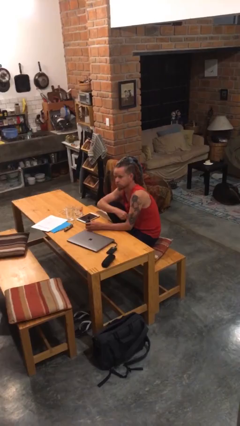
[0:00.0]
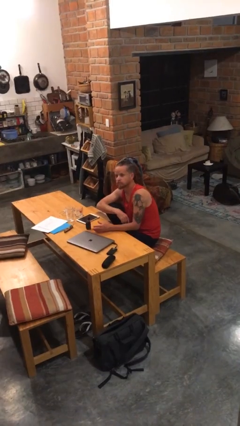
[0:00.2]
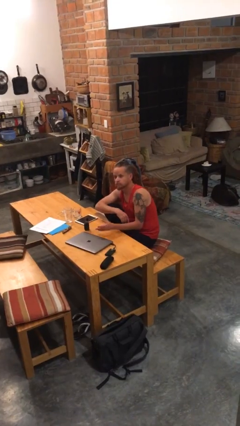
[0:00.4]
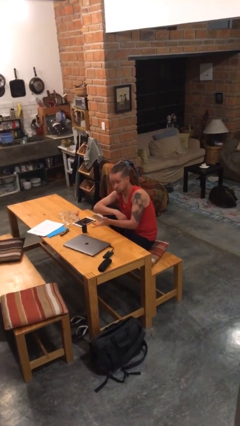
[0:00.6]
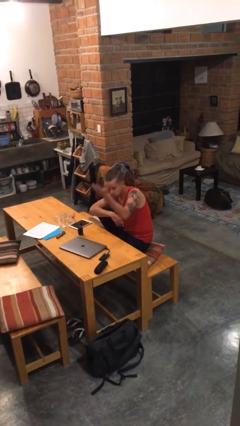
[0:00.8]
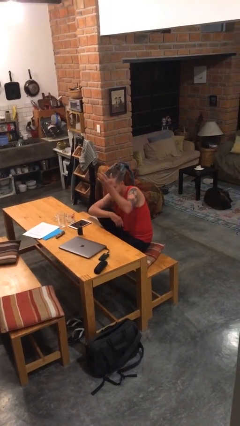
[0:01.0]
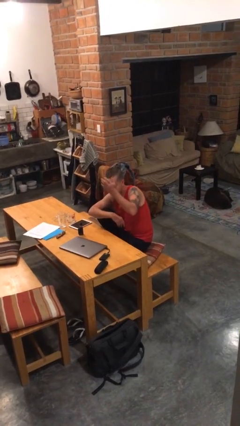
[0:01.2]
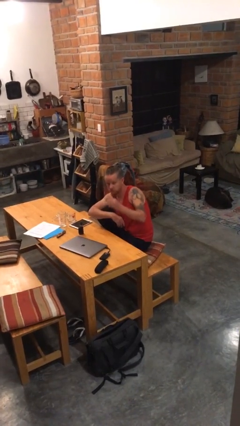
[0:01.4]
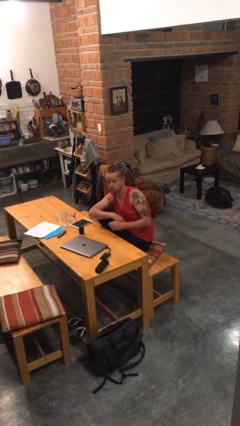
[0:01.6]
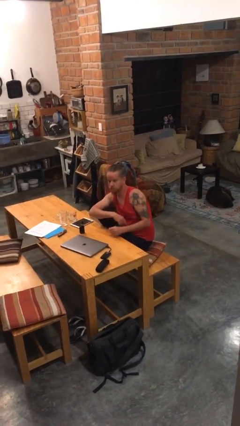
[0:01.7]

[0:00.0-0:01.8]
person gestures swipe up

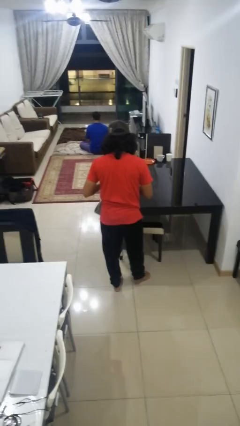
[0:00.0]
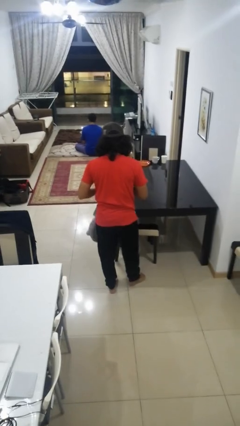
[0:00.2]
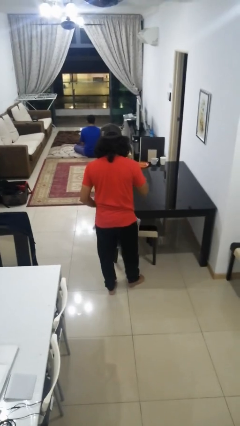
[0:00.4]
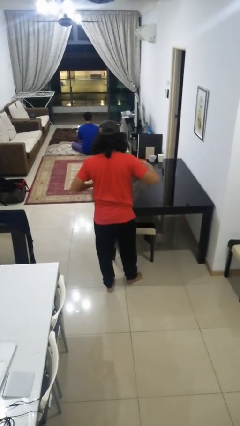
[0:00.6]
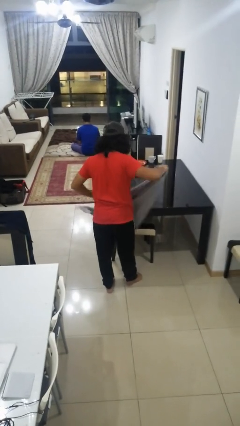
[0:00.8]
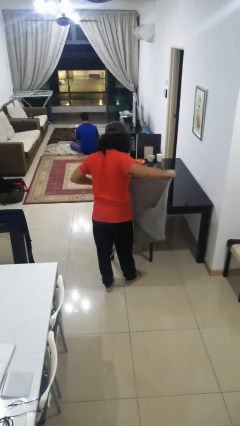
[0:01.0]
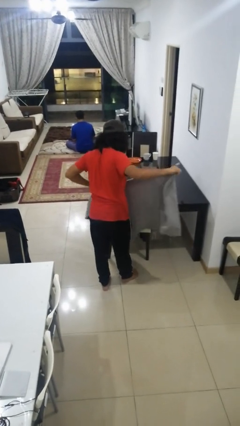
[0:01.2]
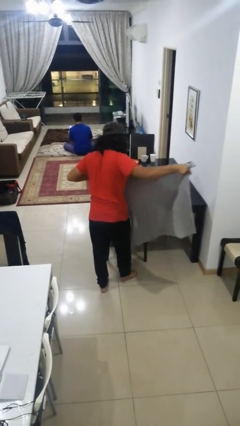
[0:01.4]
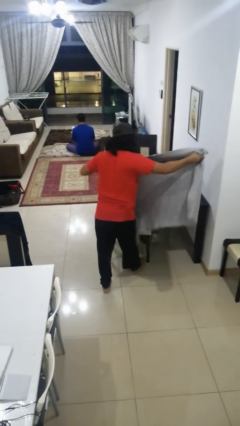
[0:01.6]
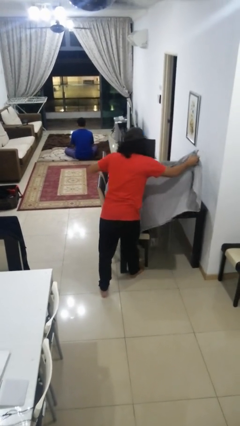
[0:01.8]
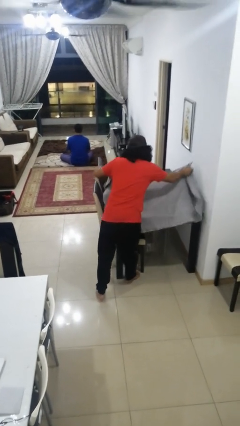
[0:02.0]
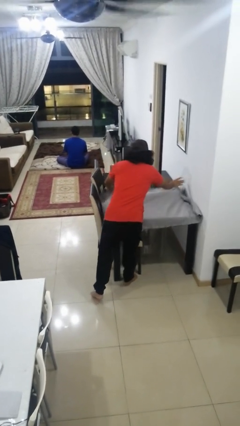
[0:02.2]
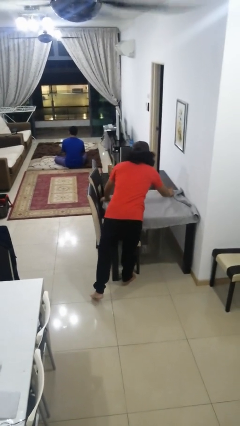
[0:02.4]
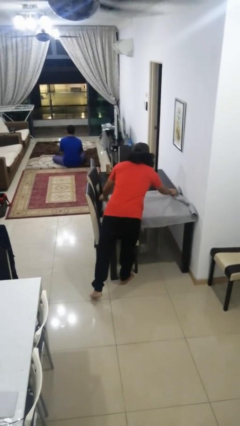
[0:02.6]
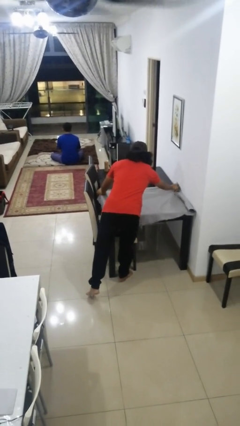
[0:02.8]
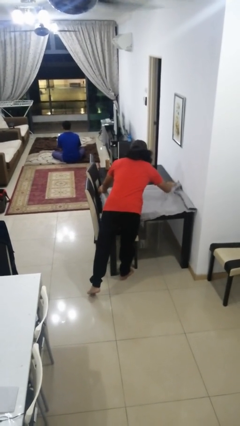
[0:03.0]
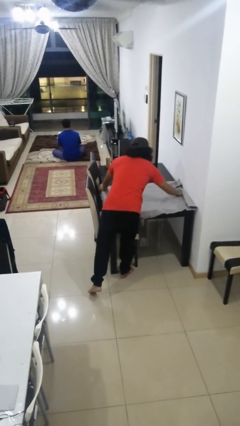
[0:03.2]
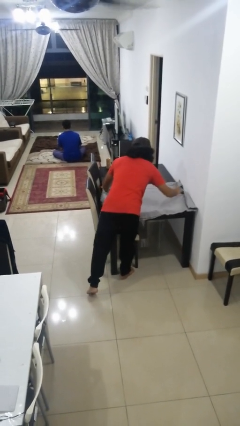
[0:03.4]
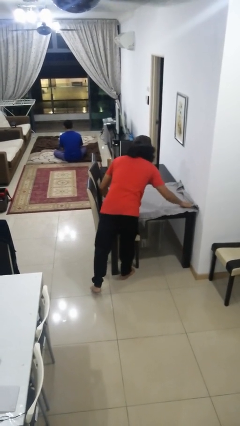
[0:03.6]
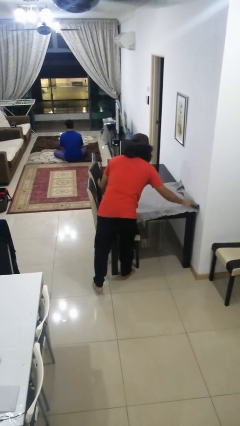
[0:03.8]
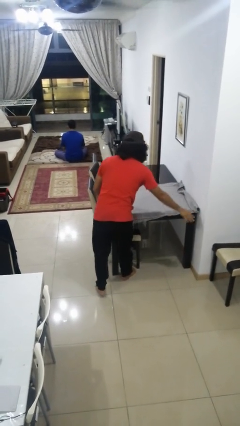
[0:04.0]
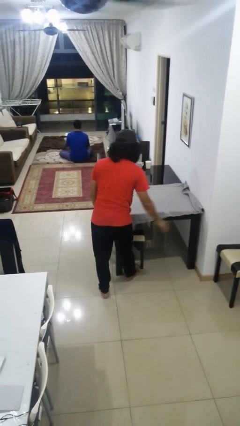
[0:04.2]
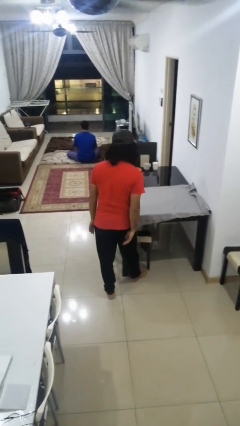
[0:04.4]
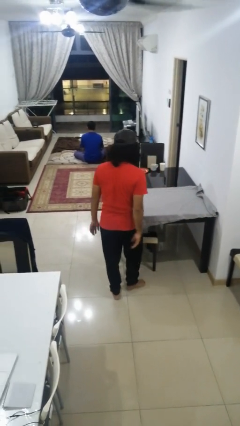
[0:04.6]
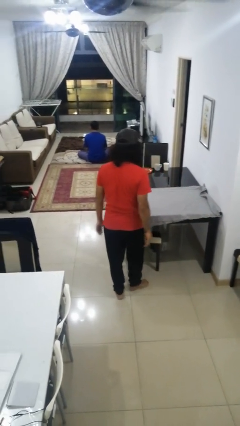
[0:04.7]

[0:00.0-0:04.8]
person spreads tablecloth

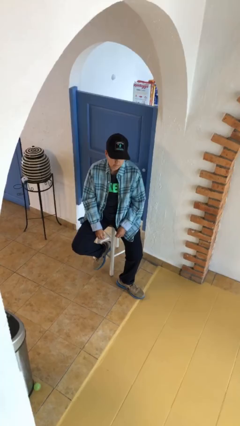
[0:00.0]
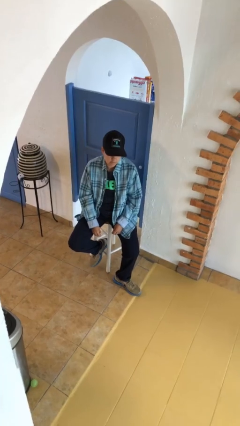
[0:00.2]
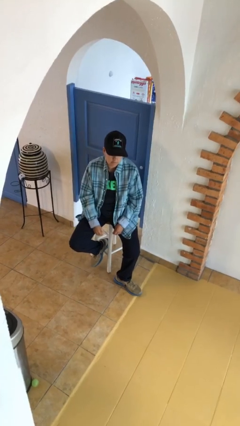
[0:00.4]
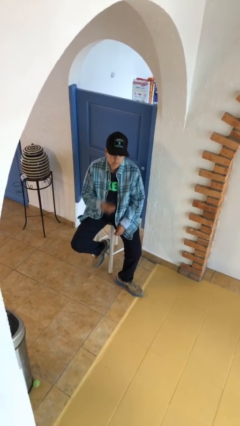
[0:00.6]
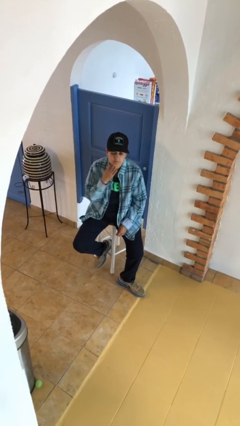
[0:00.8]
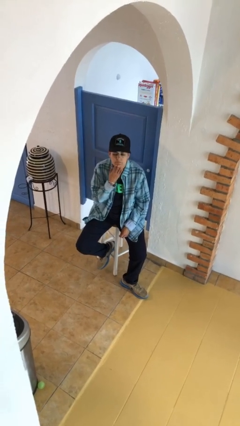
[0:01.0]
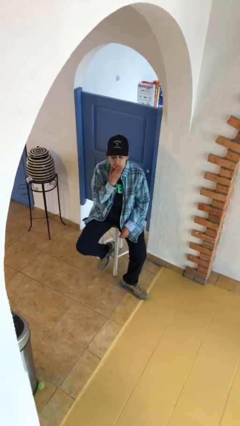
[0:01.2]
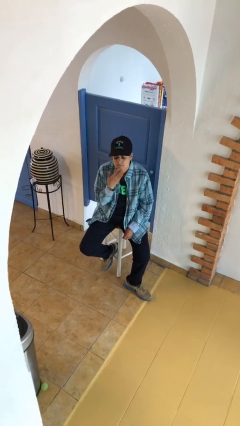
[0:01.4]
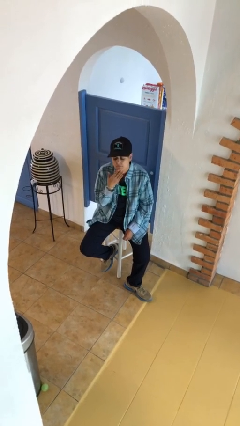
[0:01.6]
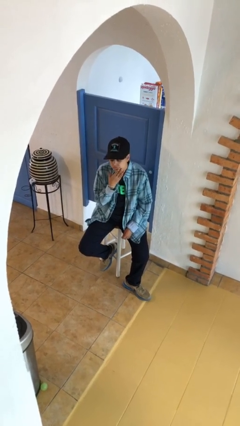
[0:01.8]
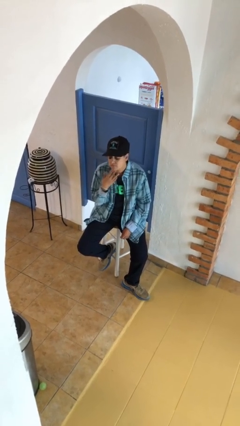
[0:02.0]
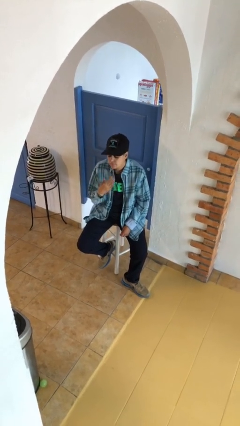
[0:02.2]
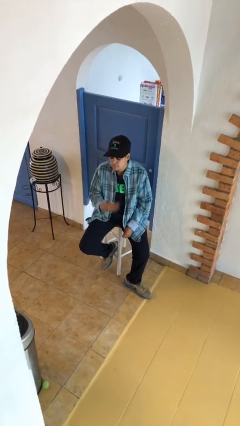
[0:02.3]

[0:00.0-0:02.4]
person strokes chin

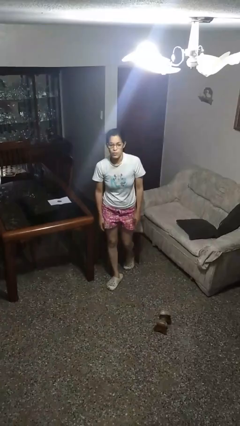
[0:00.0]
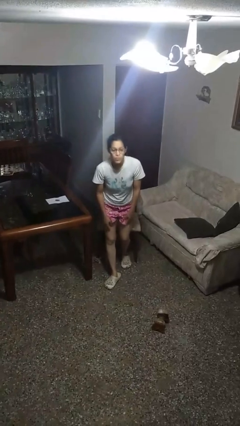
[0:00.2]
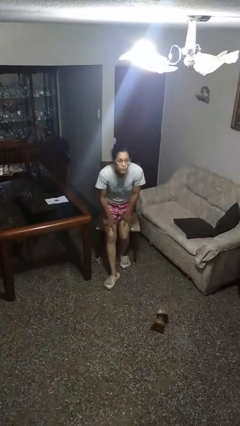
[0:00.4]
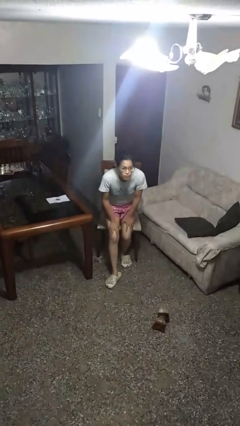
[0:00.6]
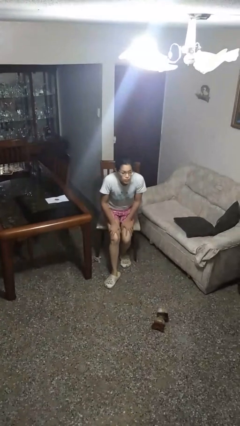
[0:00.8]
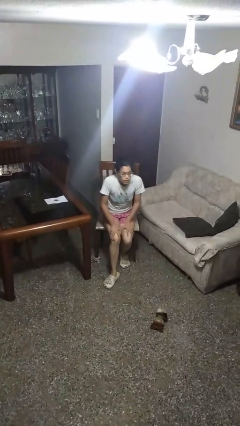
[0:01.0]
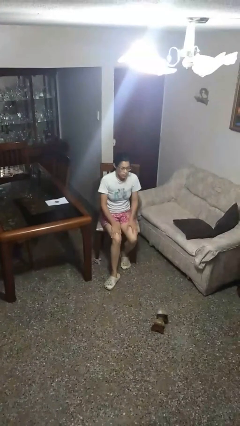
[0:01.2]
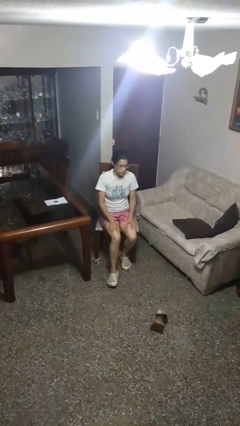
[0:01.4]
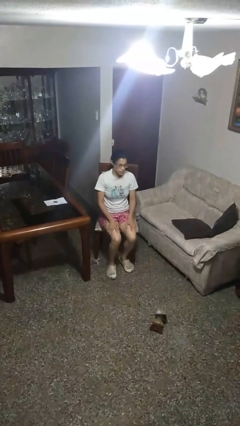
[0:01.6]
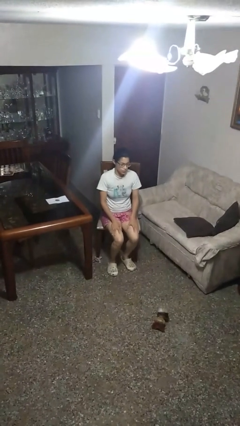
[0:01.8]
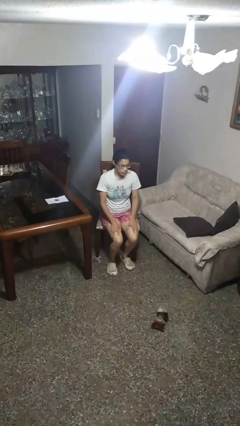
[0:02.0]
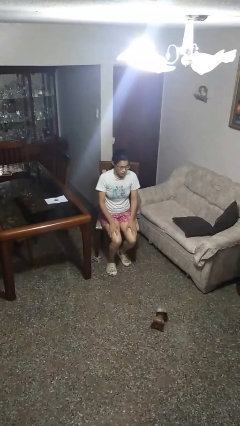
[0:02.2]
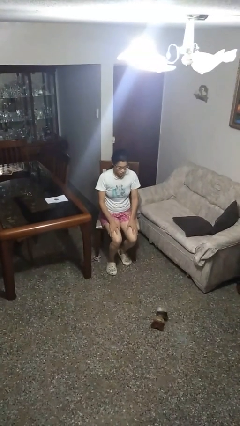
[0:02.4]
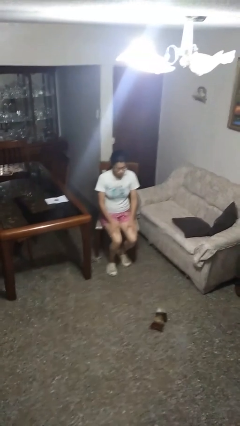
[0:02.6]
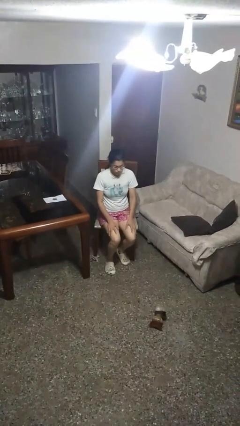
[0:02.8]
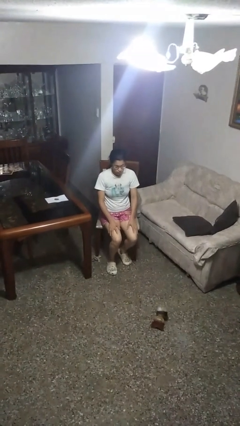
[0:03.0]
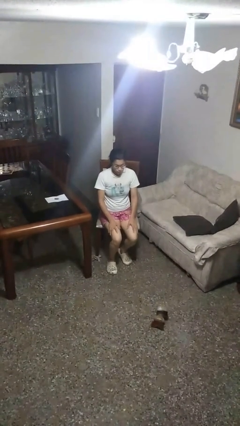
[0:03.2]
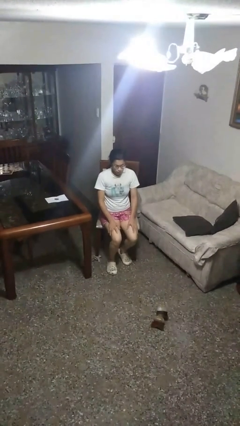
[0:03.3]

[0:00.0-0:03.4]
person sits down

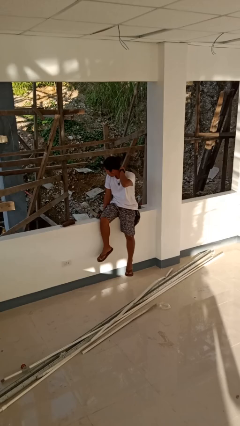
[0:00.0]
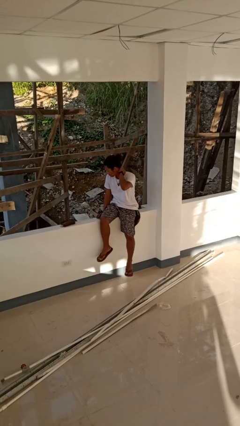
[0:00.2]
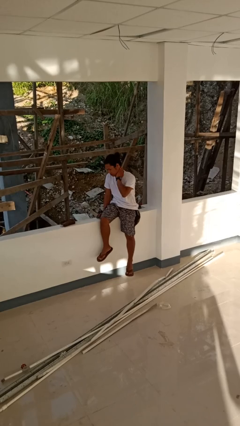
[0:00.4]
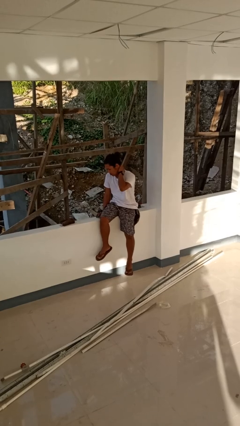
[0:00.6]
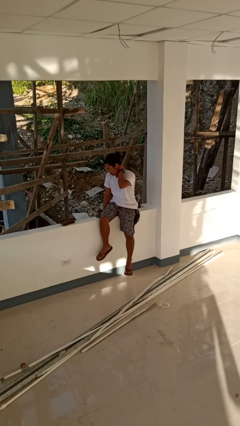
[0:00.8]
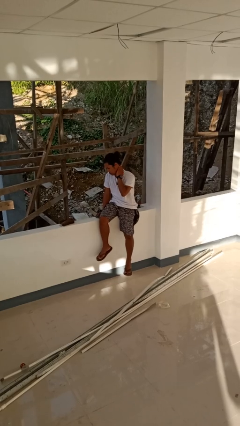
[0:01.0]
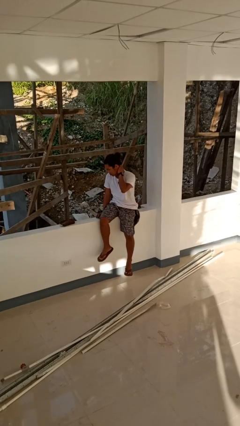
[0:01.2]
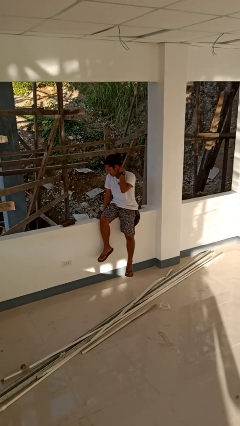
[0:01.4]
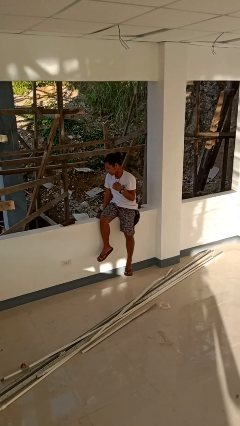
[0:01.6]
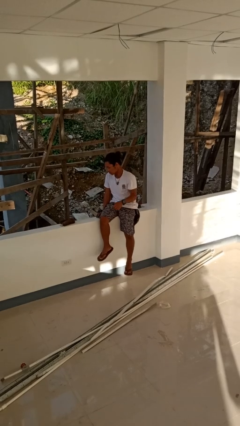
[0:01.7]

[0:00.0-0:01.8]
person rubs neck

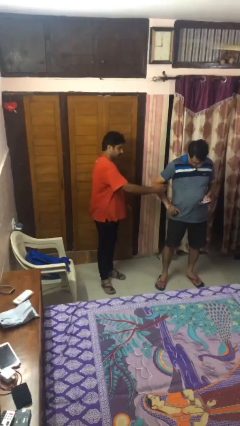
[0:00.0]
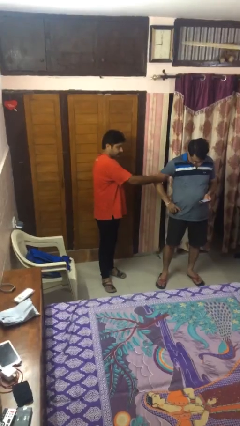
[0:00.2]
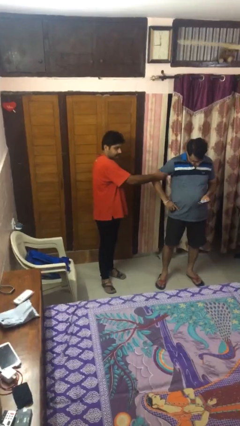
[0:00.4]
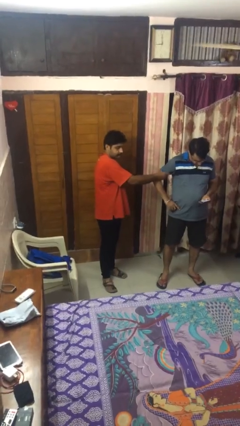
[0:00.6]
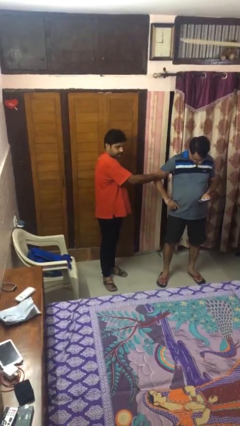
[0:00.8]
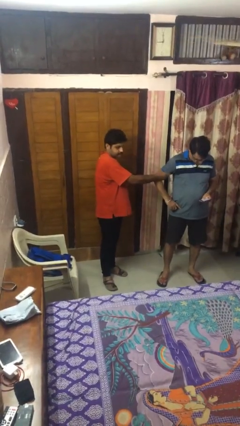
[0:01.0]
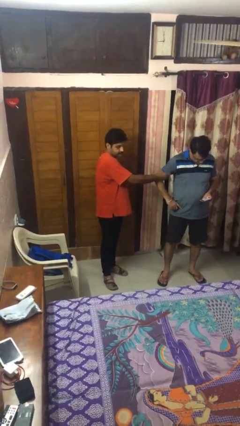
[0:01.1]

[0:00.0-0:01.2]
person grabs person by bicep

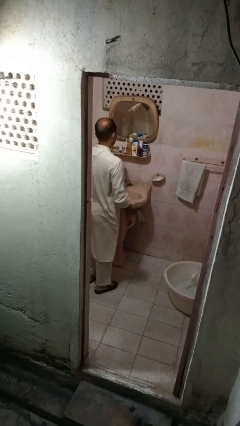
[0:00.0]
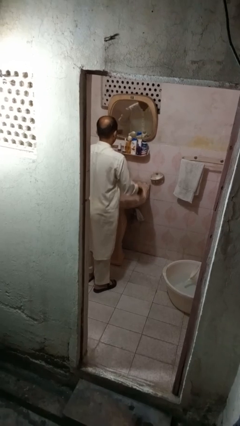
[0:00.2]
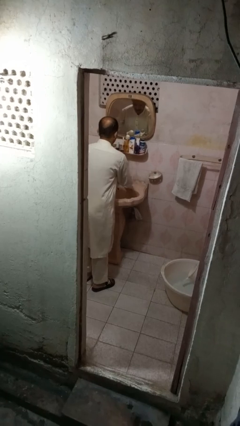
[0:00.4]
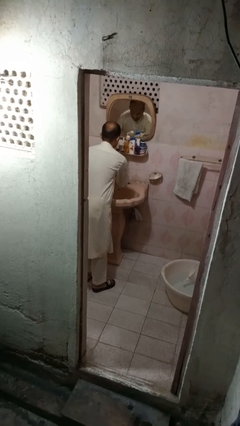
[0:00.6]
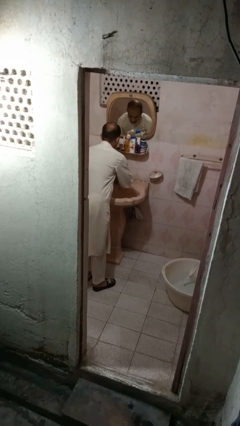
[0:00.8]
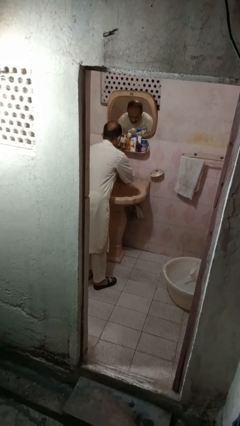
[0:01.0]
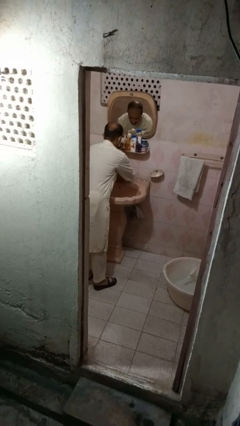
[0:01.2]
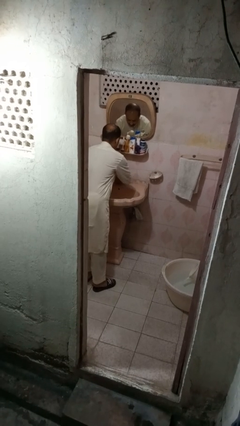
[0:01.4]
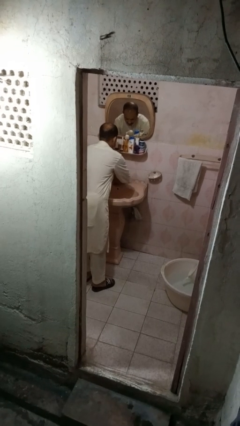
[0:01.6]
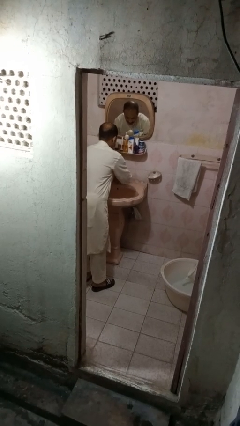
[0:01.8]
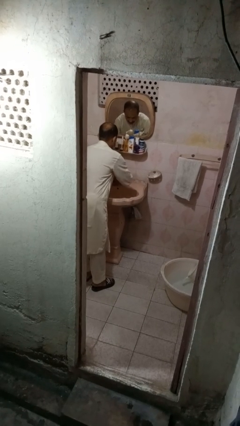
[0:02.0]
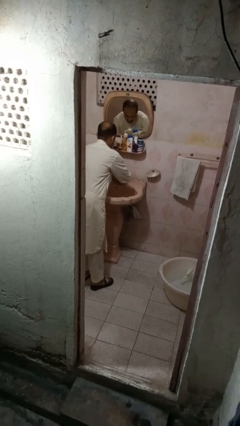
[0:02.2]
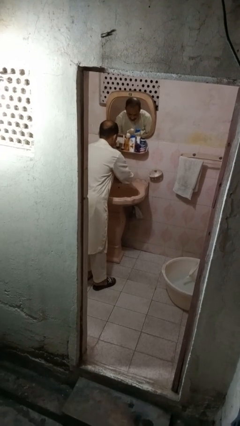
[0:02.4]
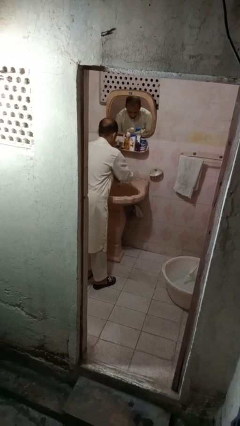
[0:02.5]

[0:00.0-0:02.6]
person washes hands
